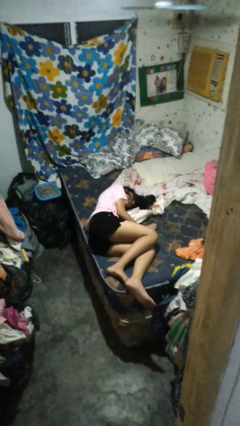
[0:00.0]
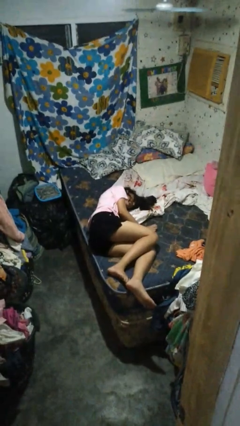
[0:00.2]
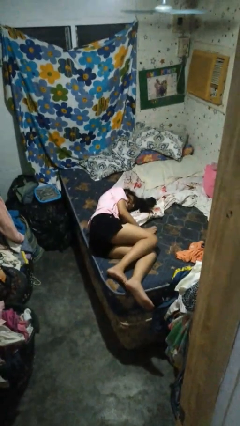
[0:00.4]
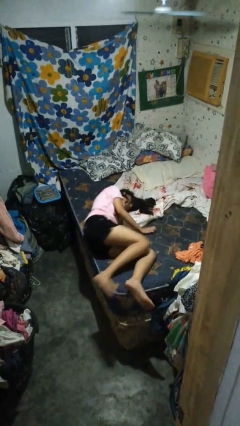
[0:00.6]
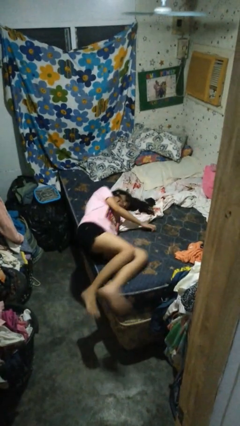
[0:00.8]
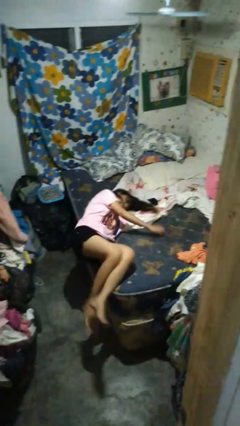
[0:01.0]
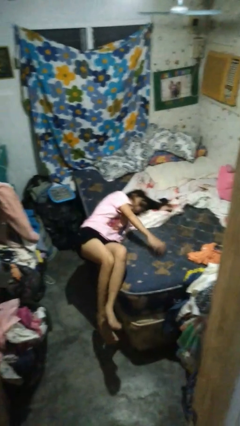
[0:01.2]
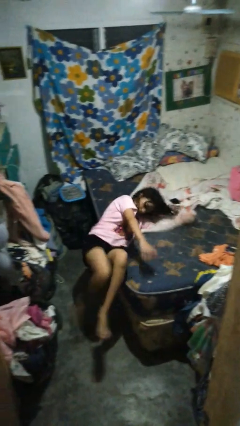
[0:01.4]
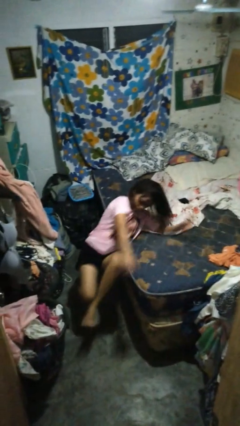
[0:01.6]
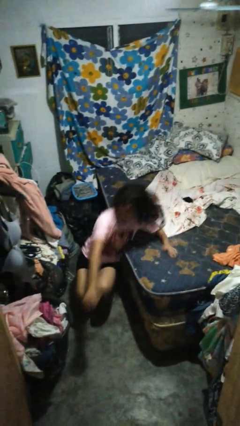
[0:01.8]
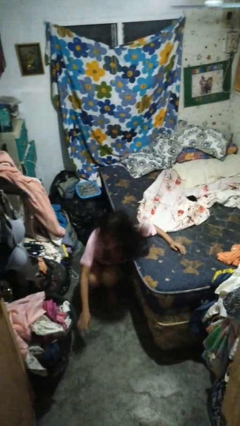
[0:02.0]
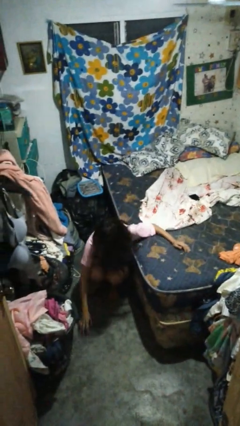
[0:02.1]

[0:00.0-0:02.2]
person falls from bed

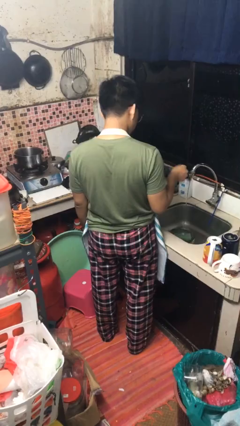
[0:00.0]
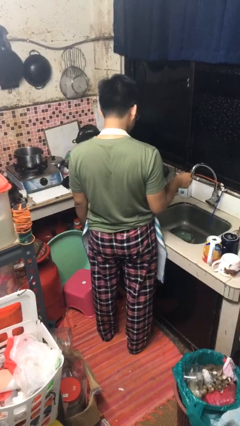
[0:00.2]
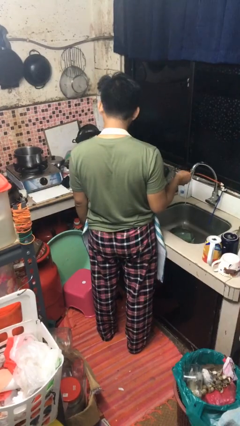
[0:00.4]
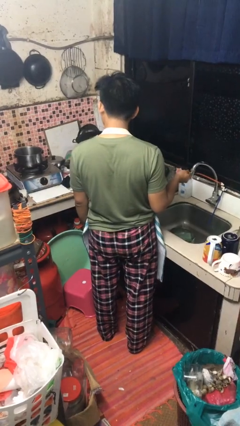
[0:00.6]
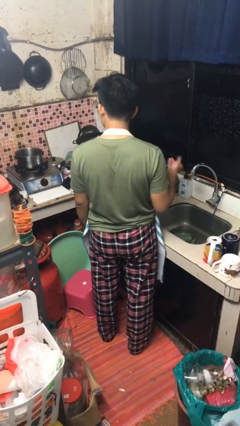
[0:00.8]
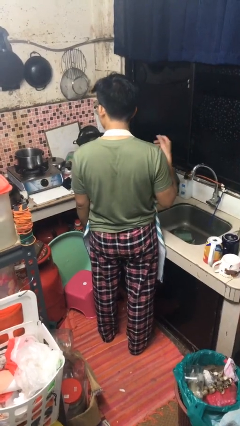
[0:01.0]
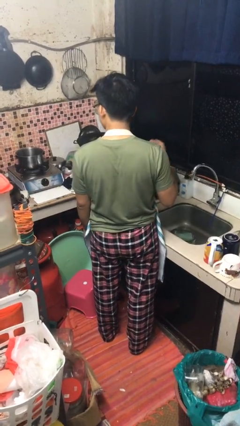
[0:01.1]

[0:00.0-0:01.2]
person turns off faucet

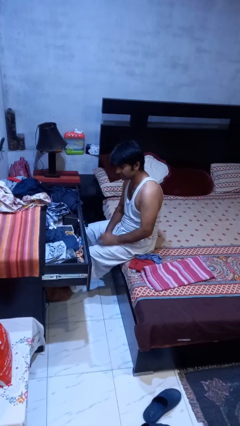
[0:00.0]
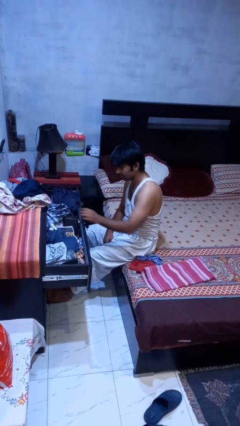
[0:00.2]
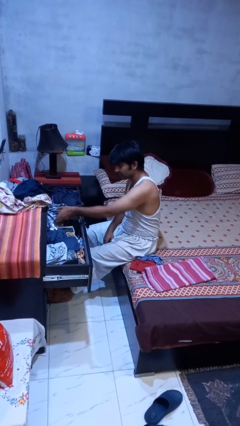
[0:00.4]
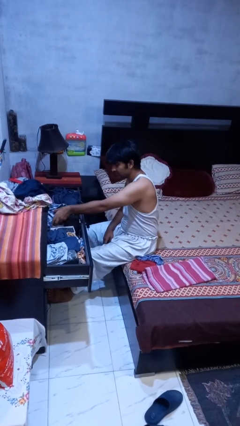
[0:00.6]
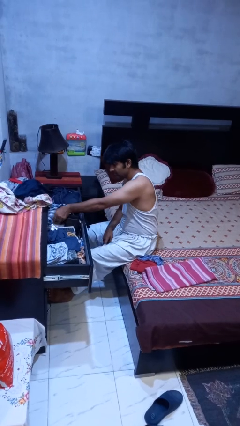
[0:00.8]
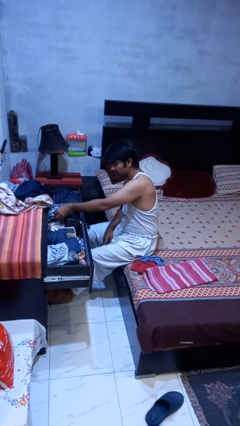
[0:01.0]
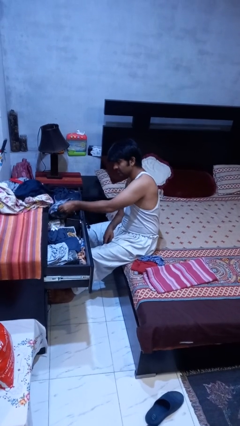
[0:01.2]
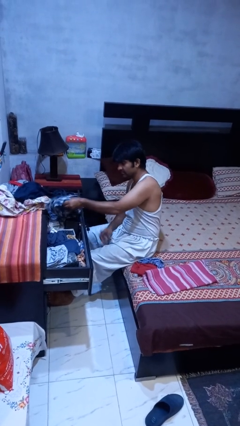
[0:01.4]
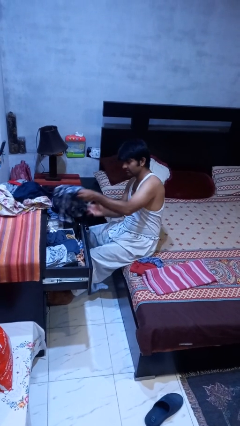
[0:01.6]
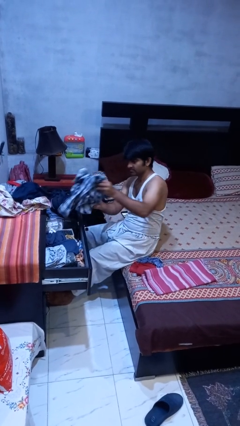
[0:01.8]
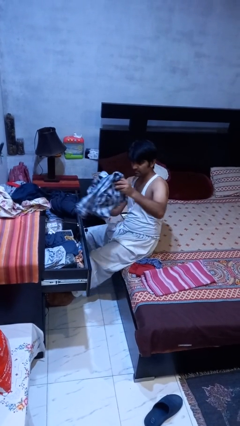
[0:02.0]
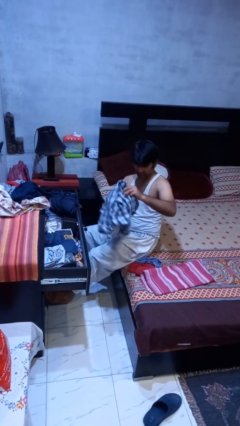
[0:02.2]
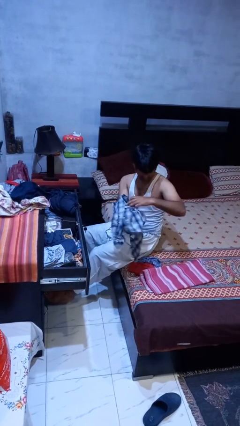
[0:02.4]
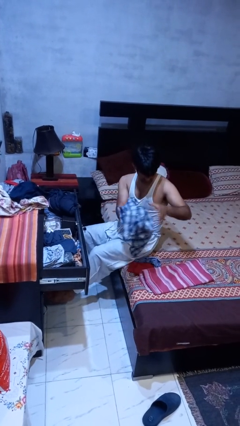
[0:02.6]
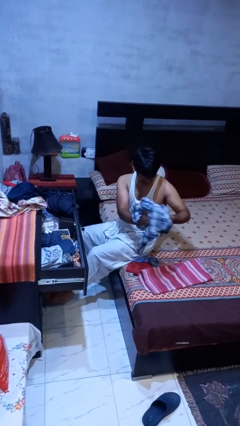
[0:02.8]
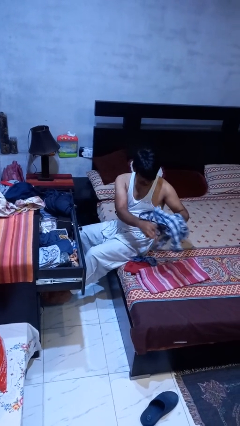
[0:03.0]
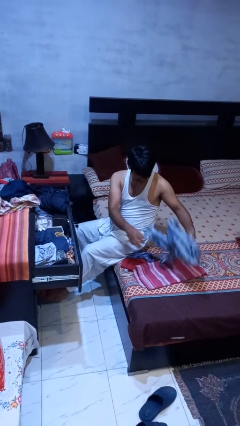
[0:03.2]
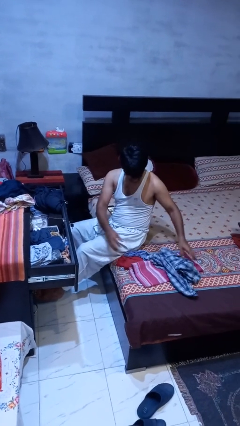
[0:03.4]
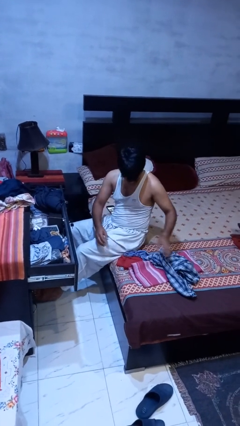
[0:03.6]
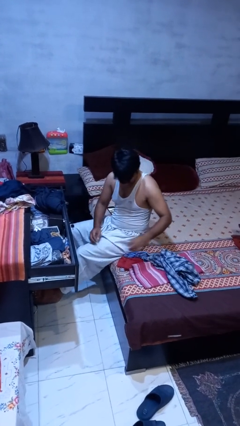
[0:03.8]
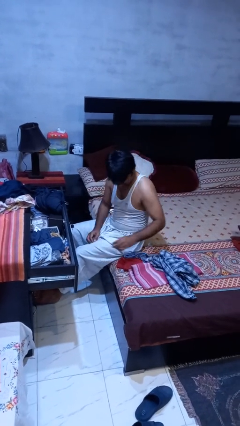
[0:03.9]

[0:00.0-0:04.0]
person takes clothes from dresser

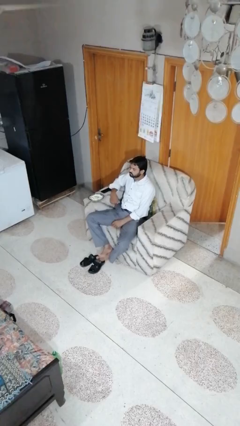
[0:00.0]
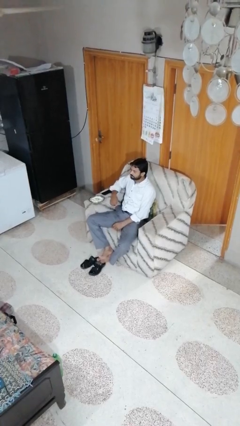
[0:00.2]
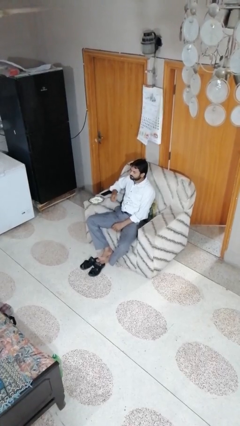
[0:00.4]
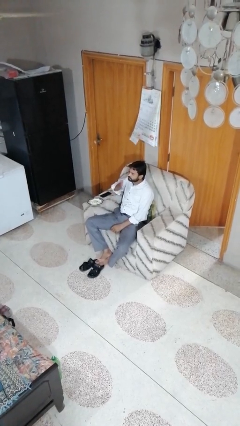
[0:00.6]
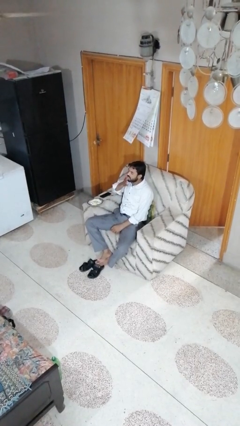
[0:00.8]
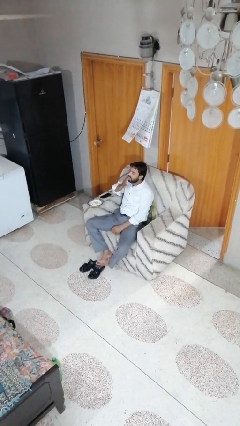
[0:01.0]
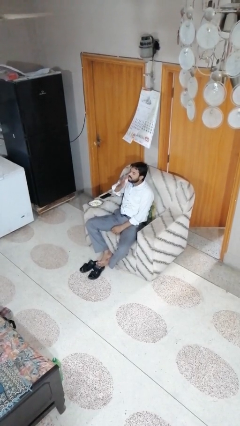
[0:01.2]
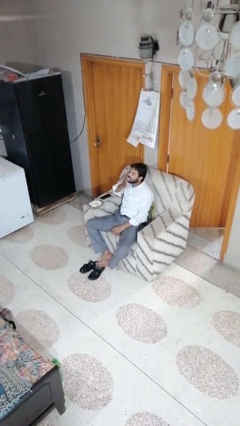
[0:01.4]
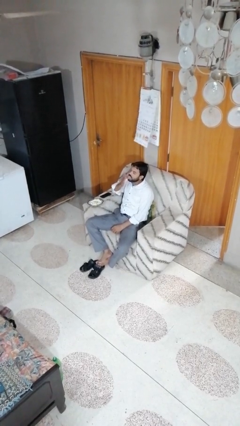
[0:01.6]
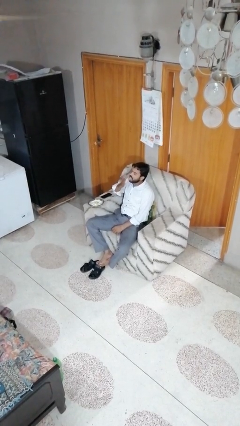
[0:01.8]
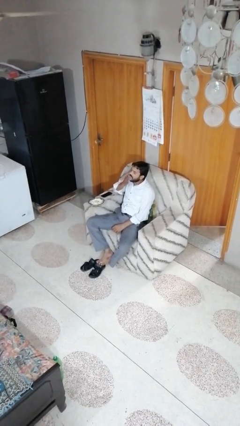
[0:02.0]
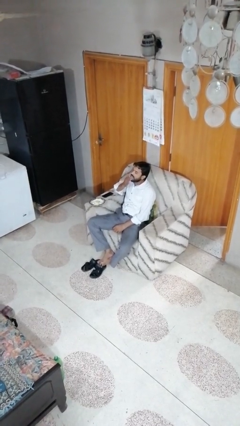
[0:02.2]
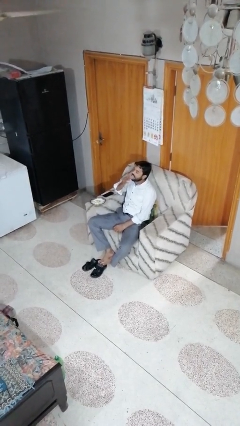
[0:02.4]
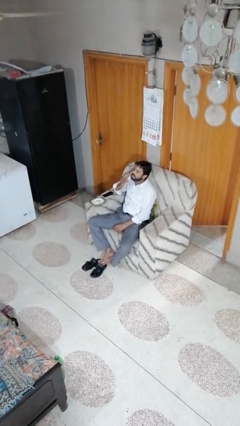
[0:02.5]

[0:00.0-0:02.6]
person licks fingers

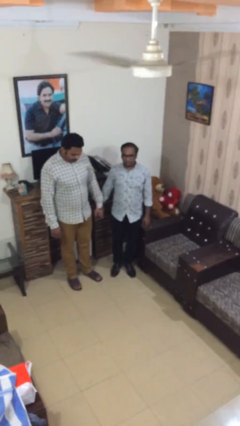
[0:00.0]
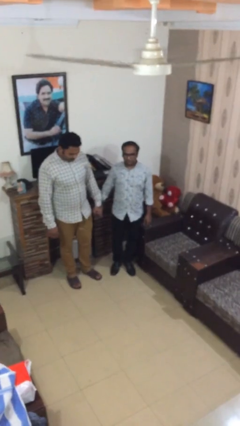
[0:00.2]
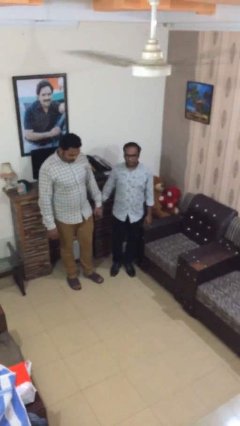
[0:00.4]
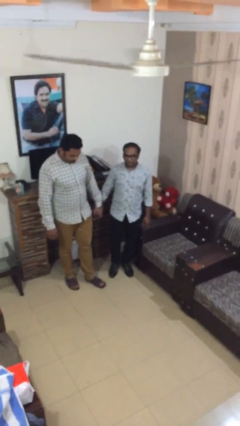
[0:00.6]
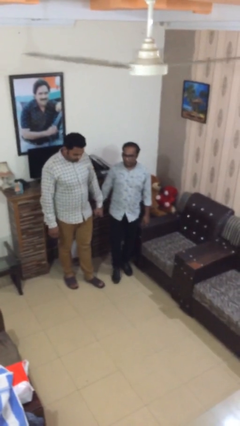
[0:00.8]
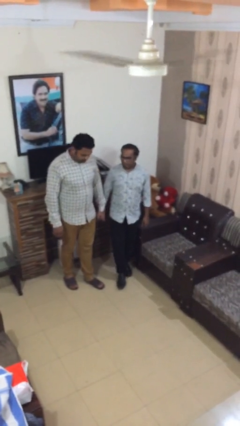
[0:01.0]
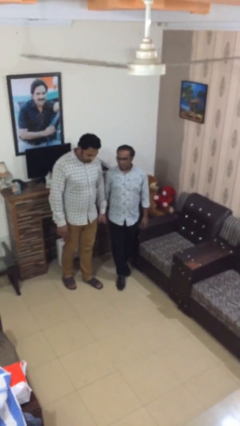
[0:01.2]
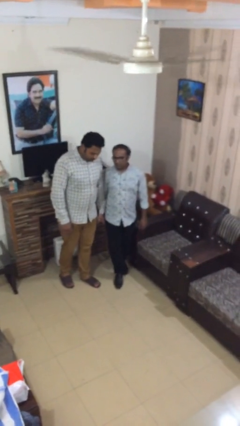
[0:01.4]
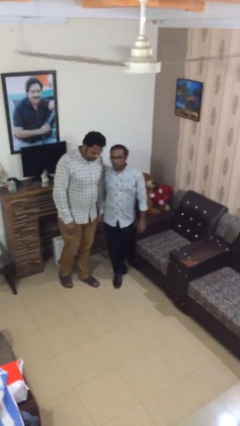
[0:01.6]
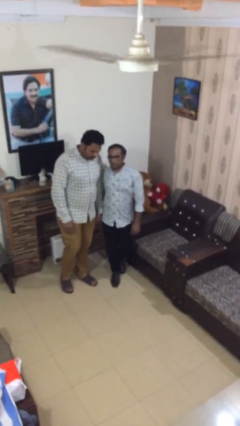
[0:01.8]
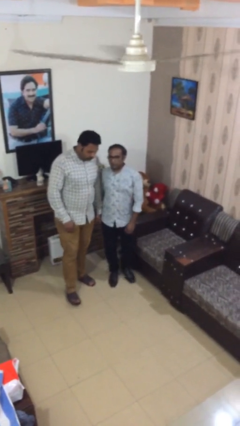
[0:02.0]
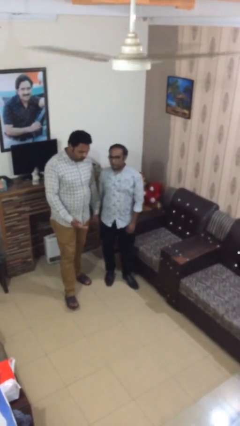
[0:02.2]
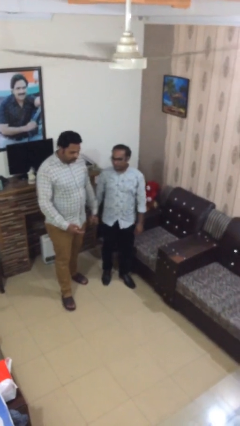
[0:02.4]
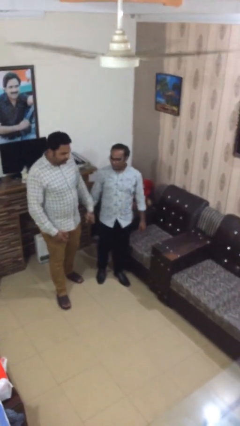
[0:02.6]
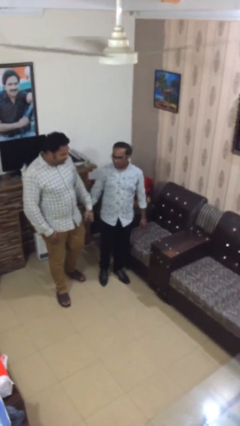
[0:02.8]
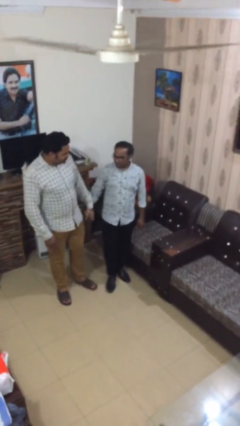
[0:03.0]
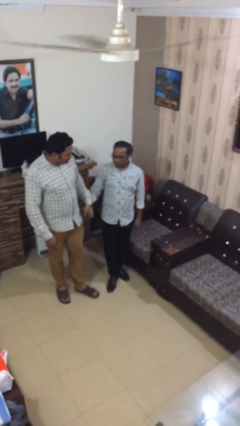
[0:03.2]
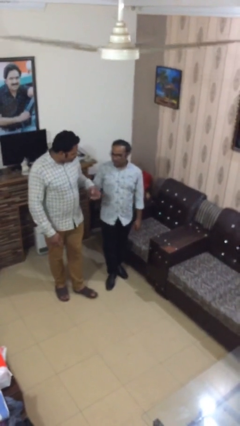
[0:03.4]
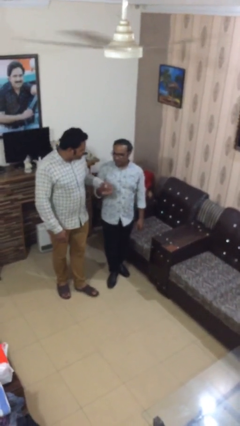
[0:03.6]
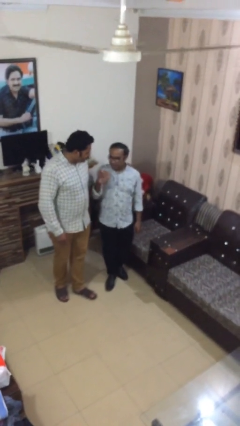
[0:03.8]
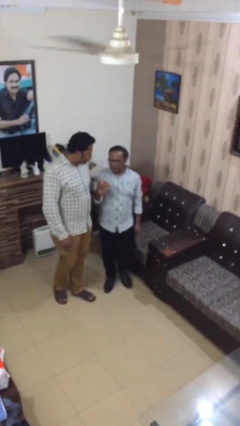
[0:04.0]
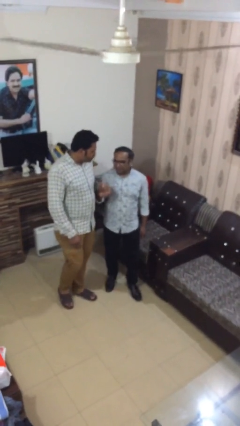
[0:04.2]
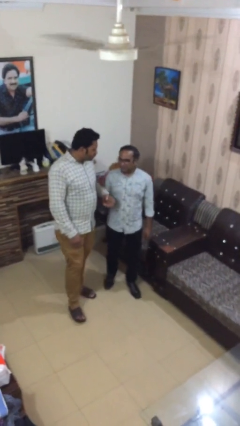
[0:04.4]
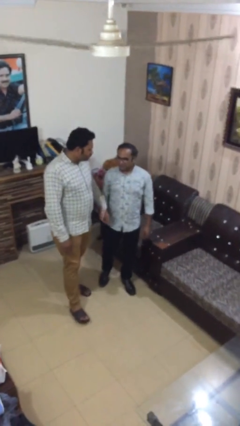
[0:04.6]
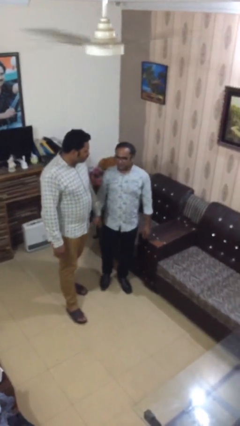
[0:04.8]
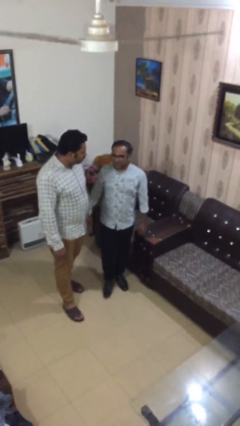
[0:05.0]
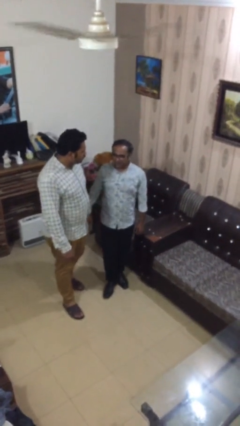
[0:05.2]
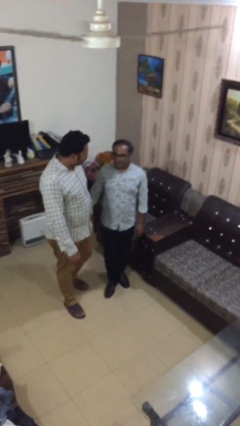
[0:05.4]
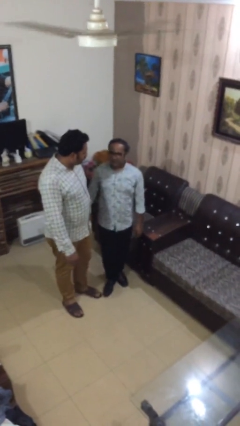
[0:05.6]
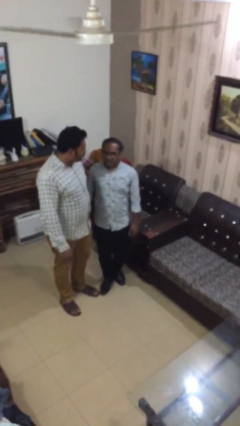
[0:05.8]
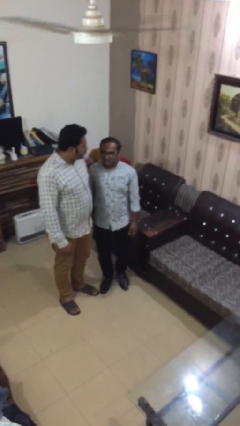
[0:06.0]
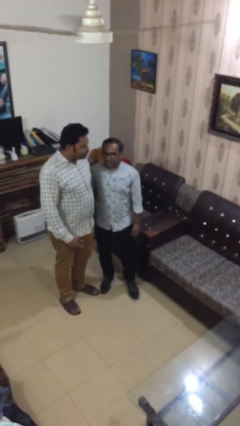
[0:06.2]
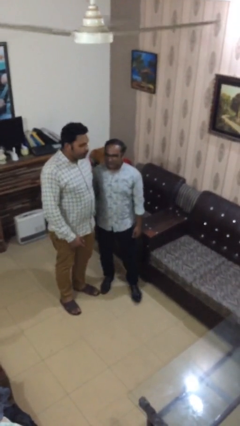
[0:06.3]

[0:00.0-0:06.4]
person holds hand

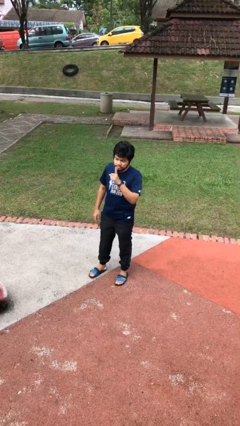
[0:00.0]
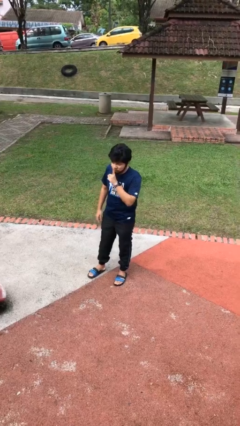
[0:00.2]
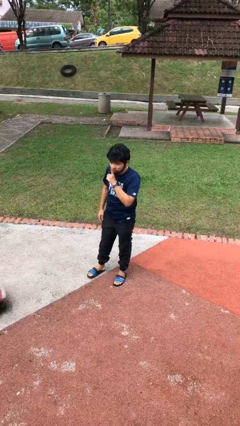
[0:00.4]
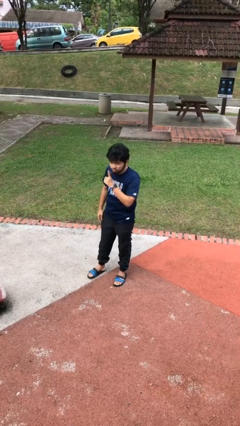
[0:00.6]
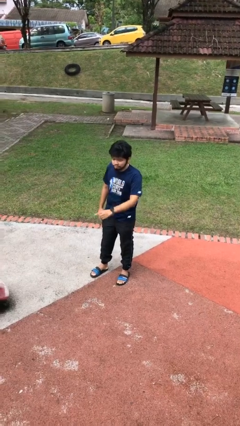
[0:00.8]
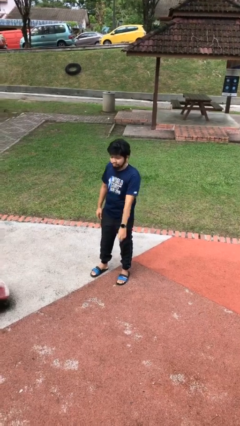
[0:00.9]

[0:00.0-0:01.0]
person gestures be quiet
